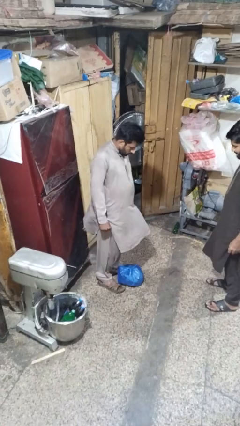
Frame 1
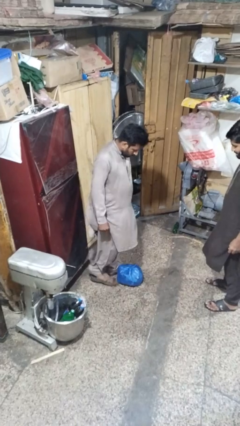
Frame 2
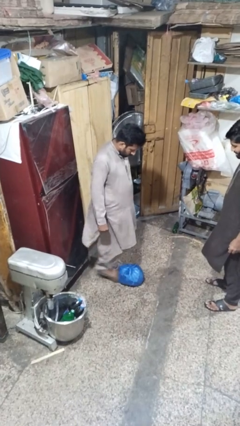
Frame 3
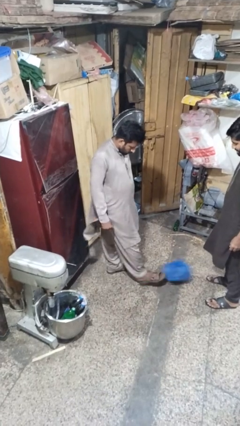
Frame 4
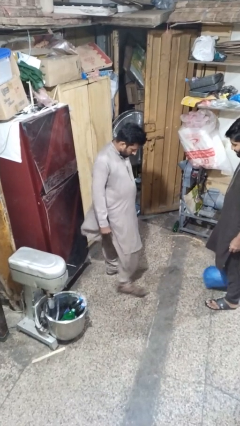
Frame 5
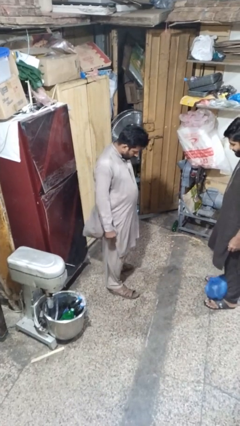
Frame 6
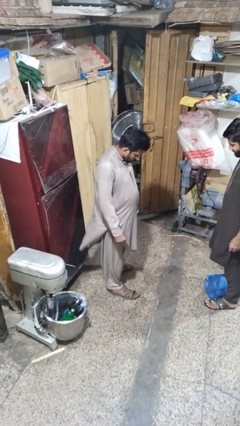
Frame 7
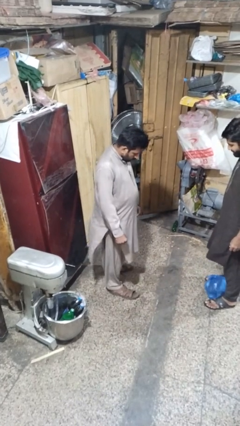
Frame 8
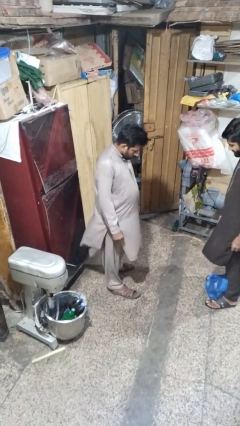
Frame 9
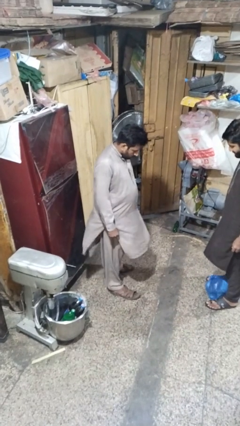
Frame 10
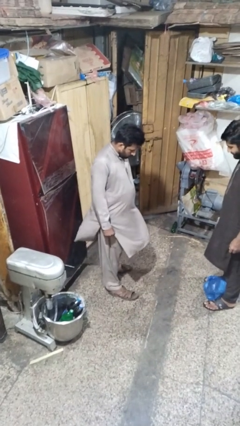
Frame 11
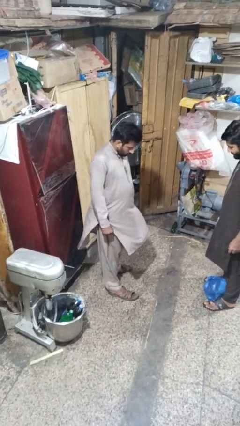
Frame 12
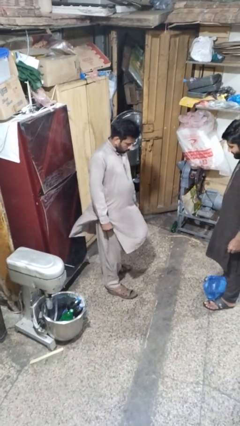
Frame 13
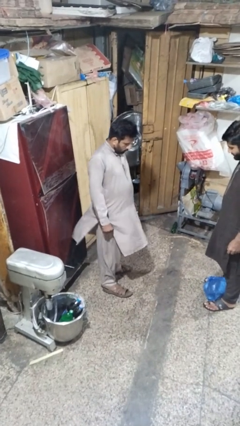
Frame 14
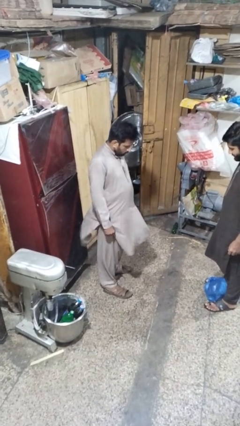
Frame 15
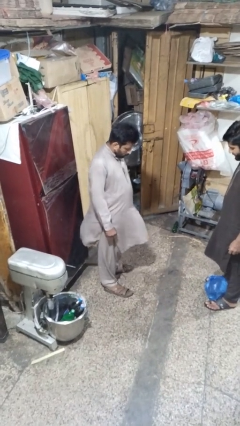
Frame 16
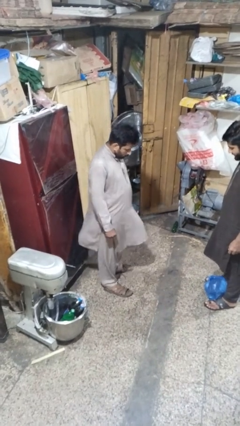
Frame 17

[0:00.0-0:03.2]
person kicks object to person

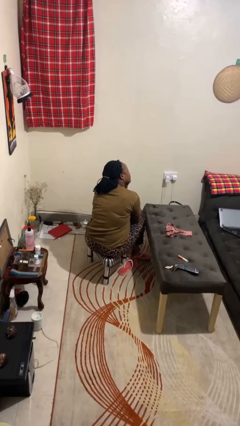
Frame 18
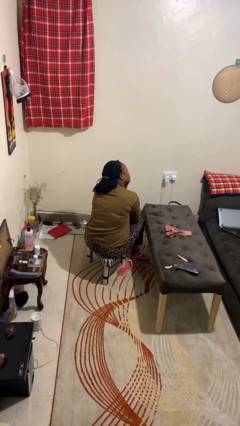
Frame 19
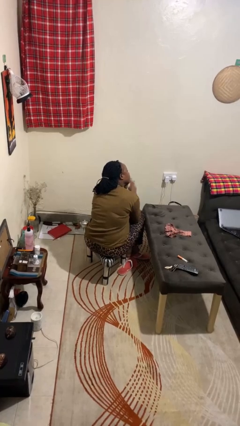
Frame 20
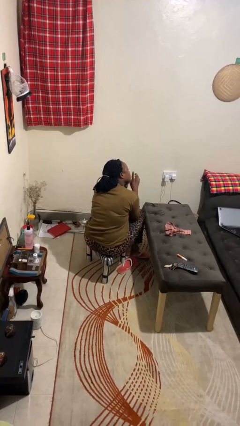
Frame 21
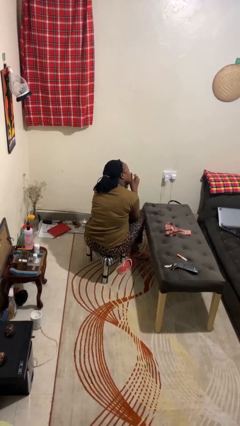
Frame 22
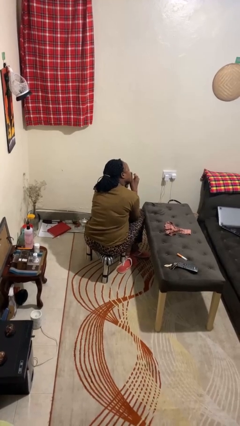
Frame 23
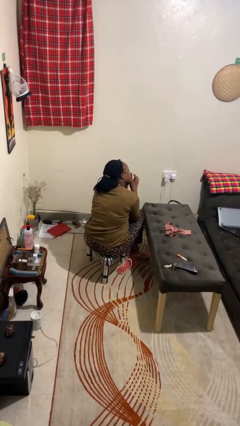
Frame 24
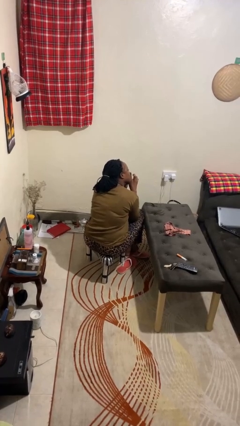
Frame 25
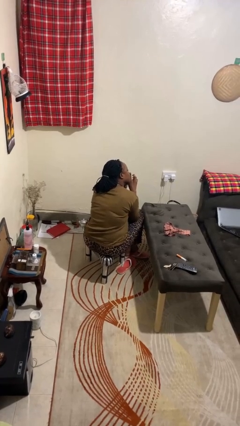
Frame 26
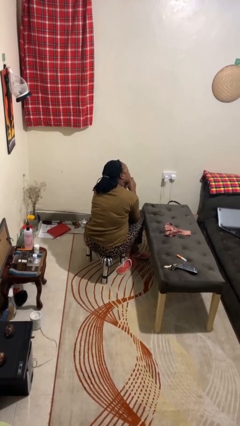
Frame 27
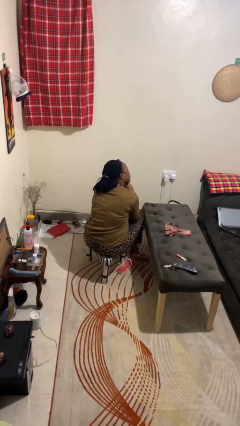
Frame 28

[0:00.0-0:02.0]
person gestures be quiet

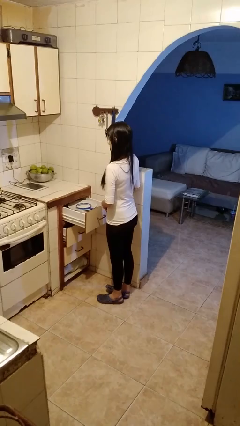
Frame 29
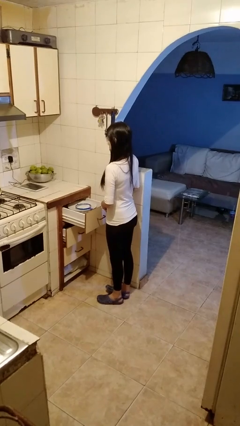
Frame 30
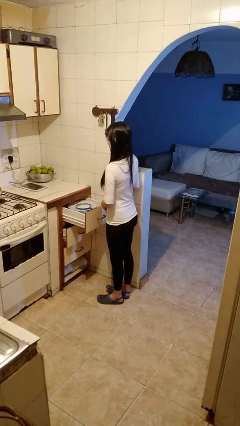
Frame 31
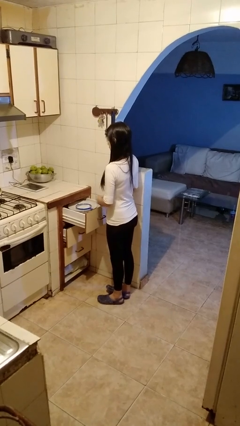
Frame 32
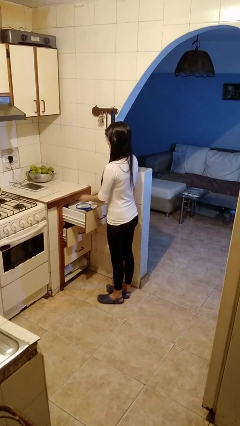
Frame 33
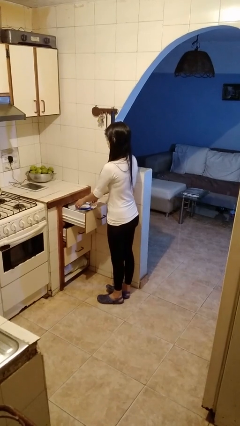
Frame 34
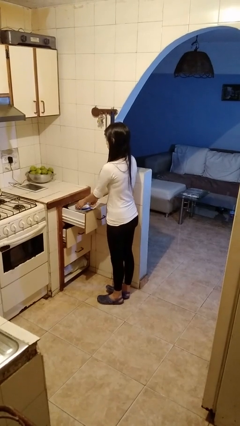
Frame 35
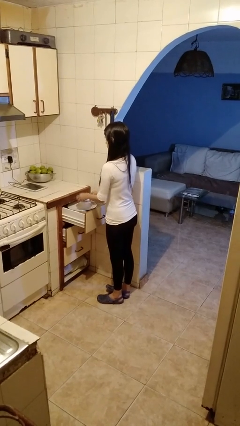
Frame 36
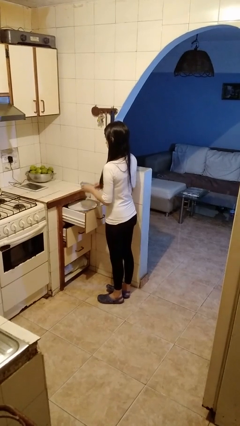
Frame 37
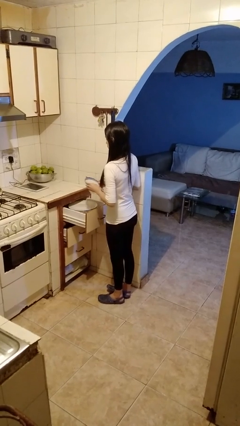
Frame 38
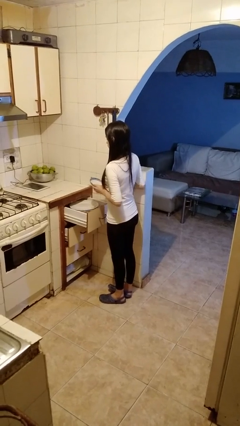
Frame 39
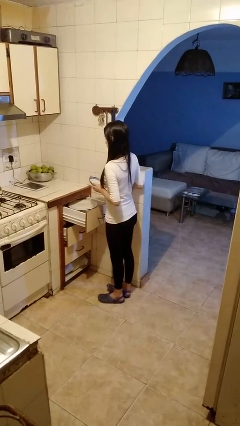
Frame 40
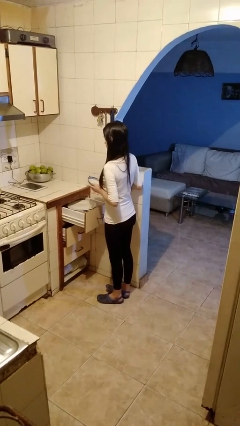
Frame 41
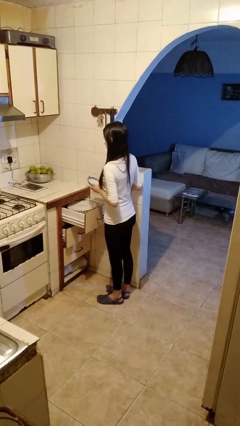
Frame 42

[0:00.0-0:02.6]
person picks up object from cabinet

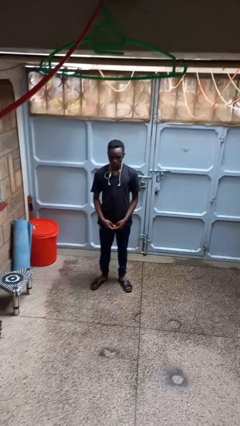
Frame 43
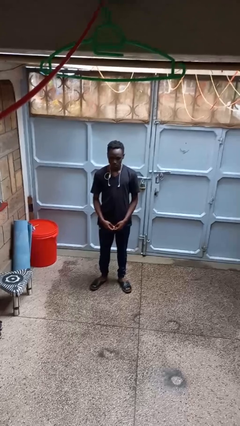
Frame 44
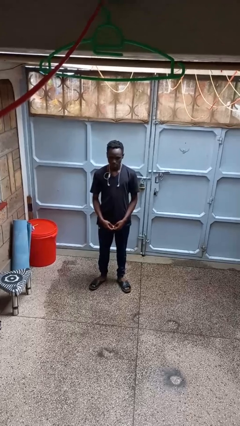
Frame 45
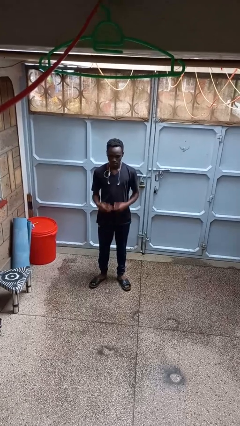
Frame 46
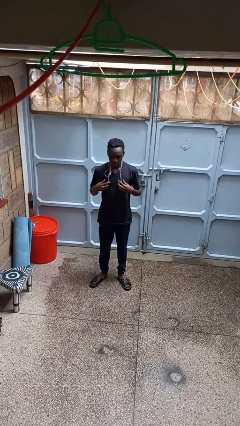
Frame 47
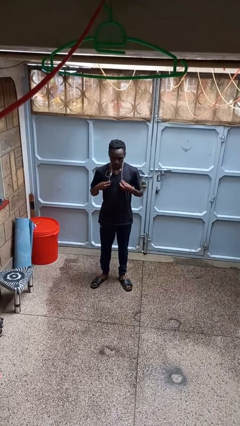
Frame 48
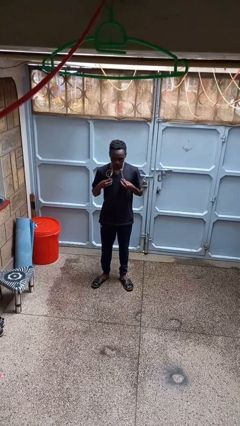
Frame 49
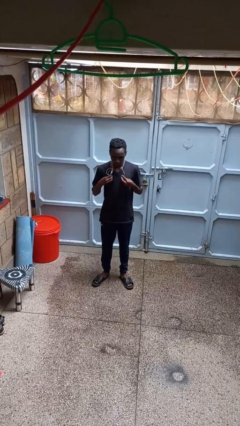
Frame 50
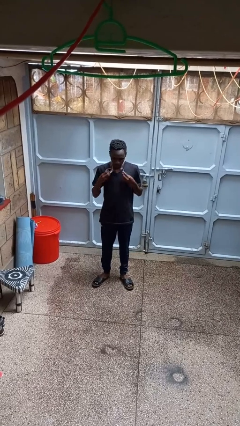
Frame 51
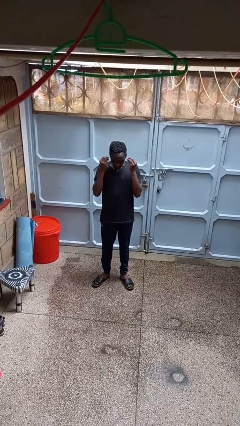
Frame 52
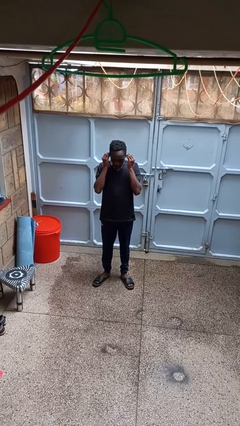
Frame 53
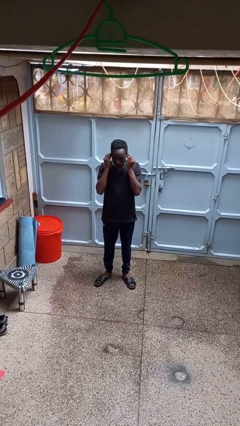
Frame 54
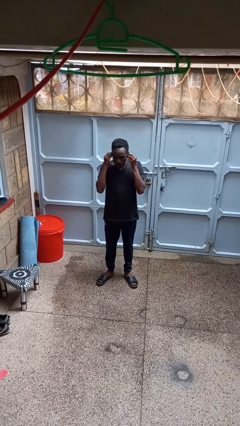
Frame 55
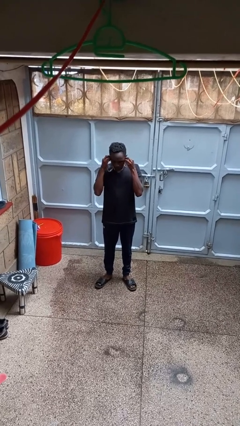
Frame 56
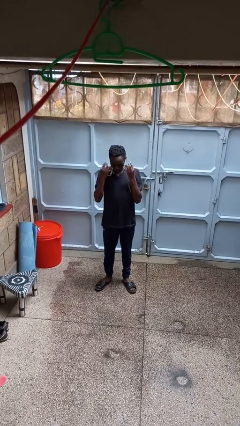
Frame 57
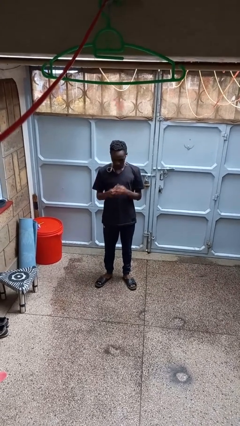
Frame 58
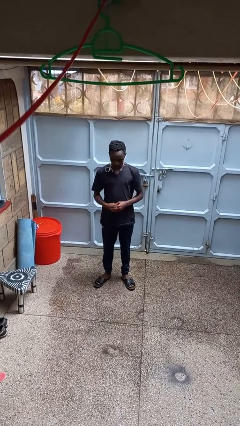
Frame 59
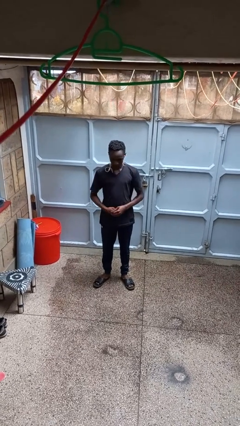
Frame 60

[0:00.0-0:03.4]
person puts on headphones

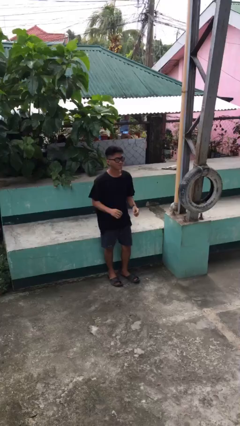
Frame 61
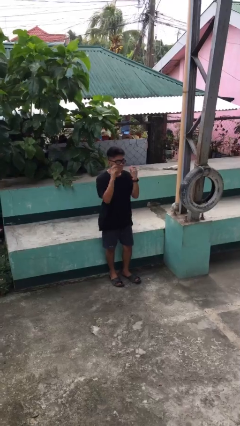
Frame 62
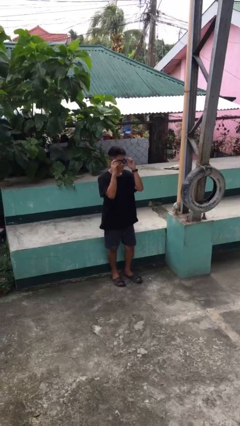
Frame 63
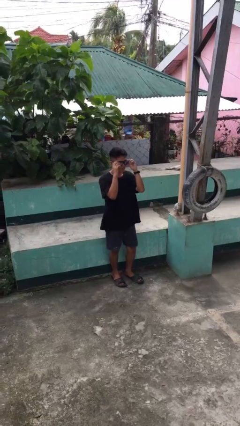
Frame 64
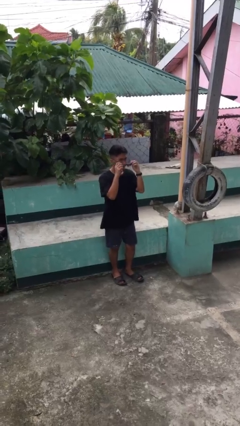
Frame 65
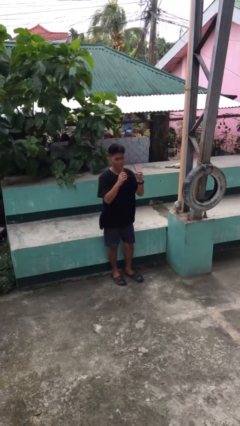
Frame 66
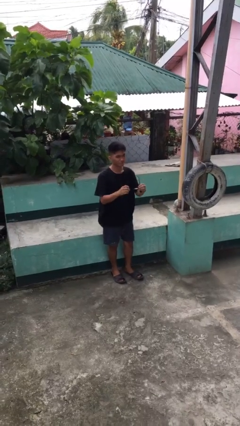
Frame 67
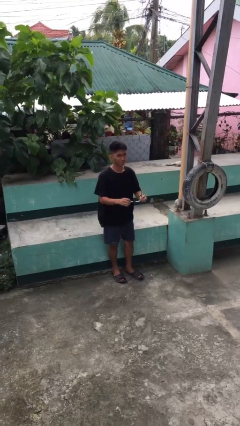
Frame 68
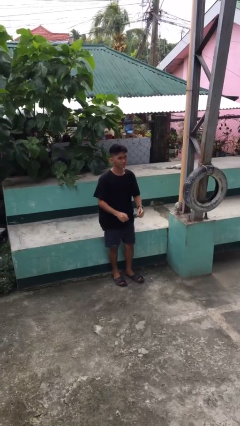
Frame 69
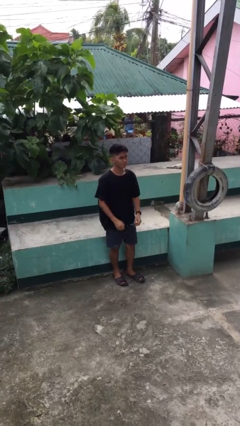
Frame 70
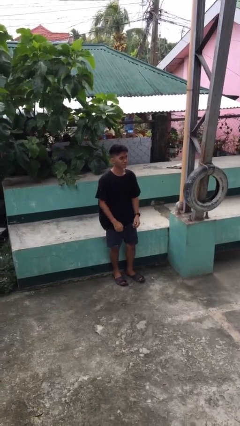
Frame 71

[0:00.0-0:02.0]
person takes off sunglasses

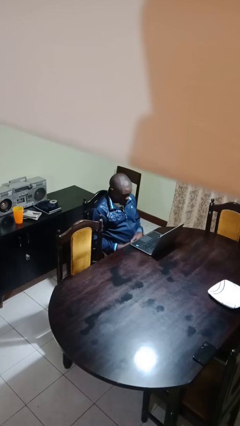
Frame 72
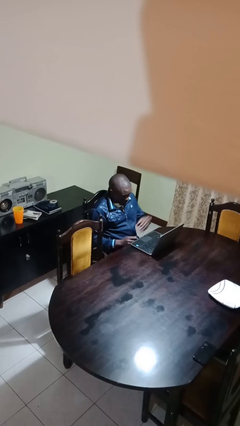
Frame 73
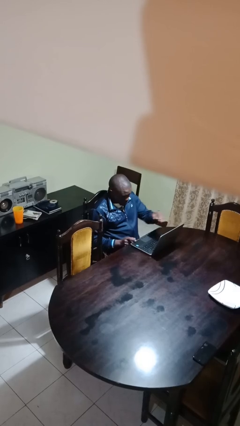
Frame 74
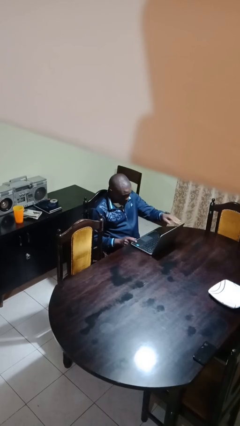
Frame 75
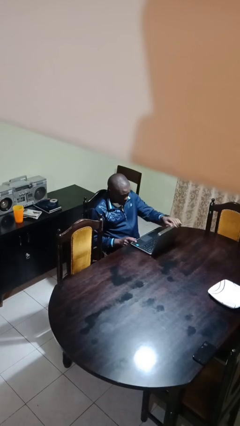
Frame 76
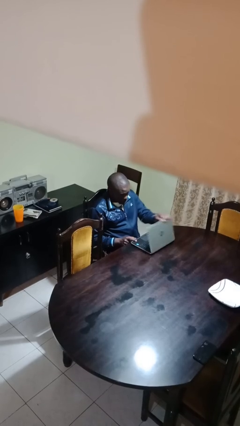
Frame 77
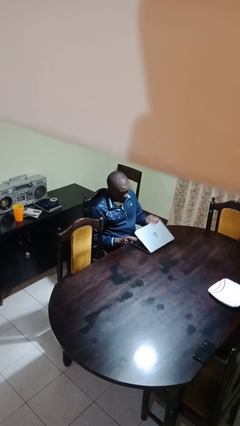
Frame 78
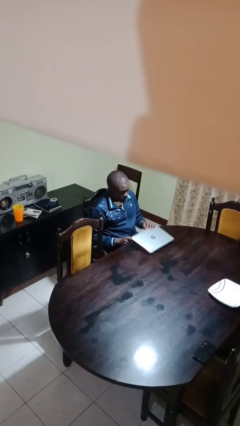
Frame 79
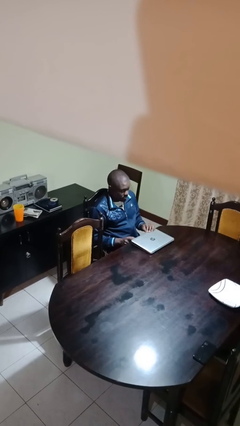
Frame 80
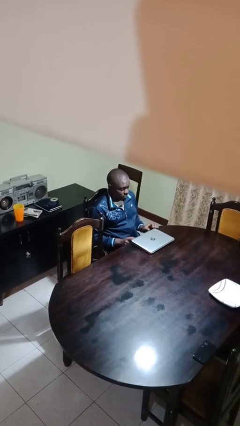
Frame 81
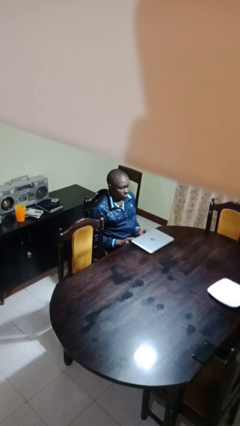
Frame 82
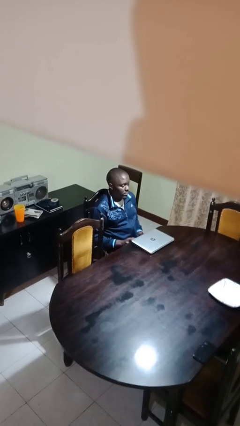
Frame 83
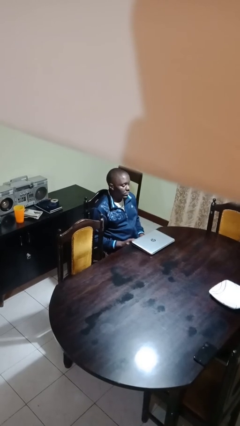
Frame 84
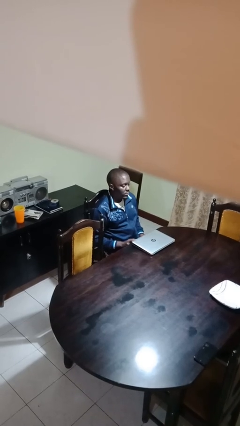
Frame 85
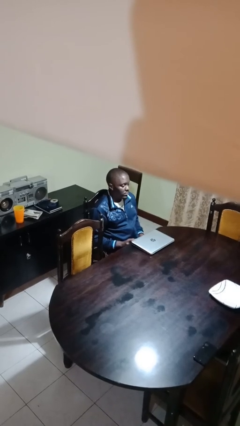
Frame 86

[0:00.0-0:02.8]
person closes laptop

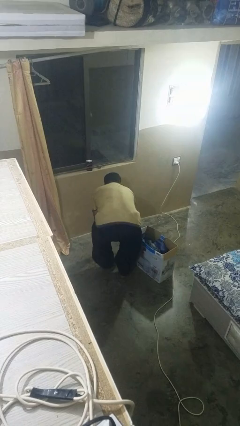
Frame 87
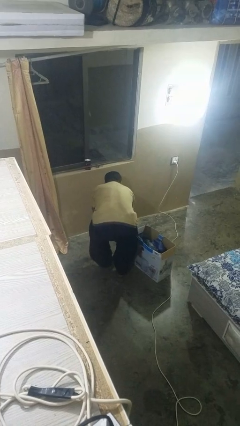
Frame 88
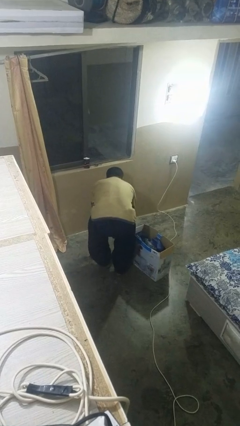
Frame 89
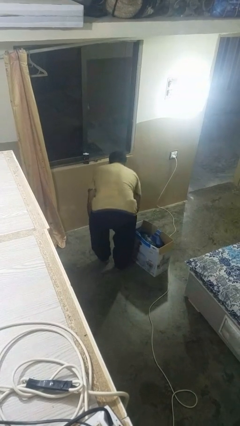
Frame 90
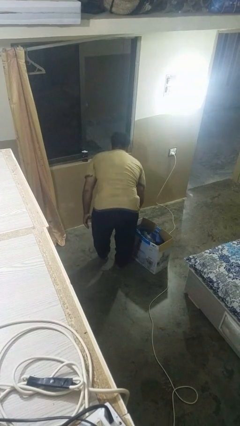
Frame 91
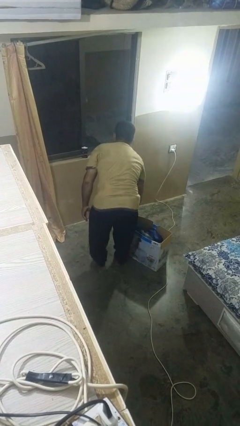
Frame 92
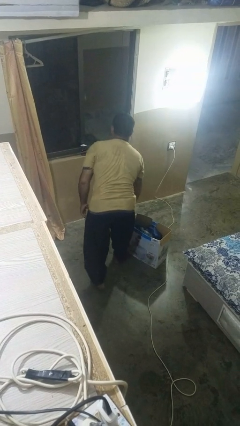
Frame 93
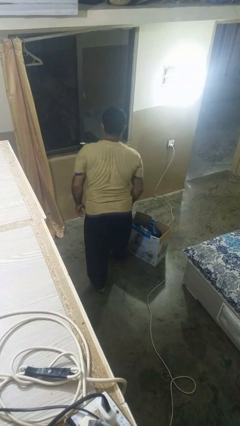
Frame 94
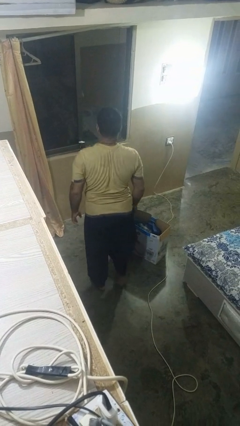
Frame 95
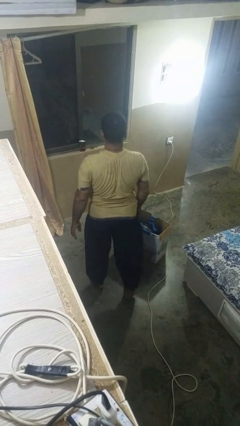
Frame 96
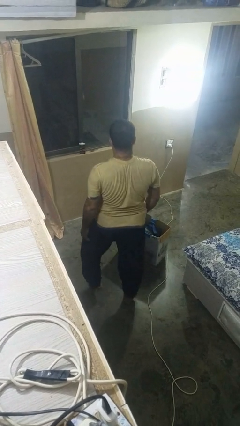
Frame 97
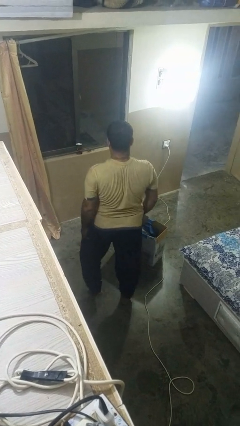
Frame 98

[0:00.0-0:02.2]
person stands up from floor
